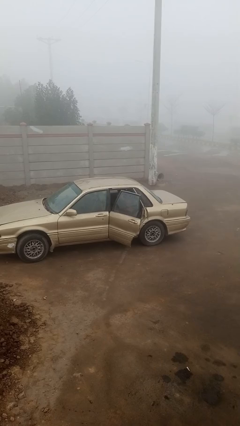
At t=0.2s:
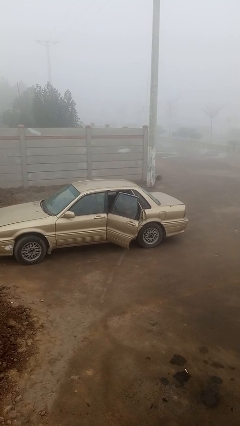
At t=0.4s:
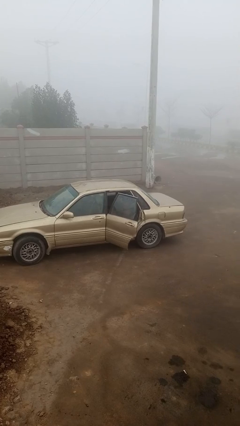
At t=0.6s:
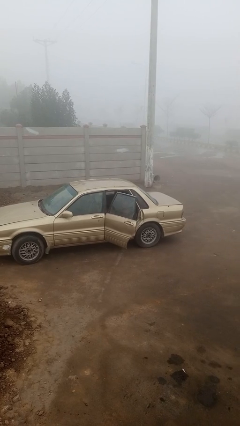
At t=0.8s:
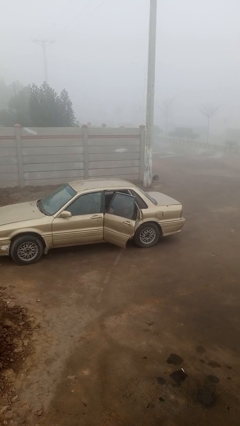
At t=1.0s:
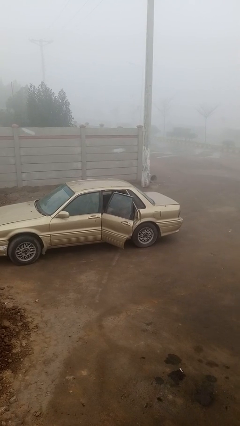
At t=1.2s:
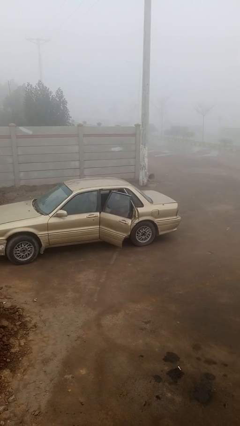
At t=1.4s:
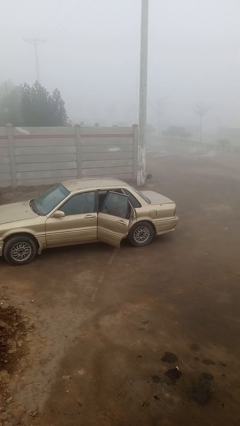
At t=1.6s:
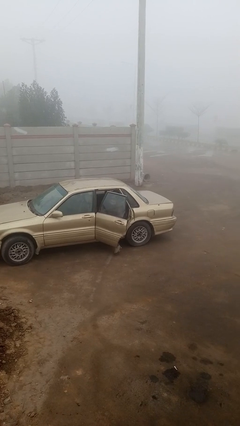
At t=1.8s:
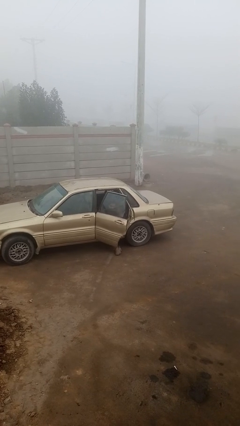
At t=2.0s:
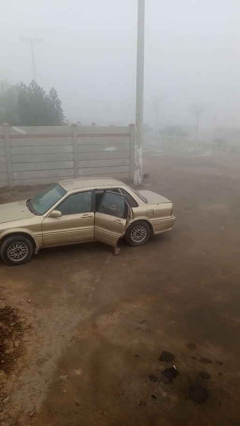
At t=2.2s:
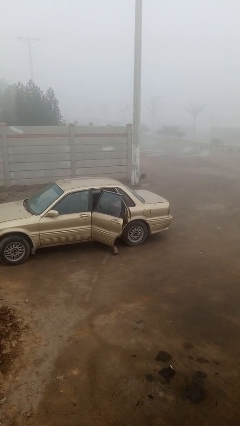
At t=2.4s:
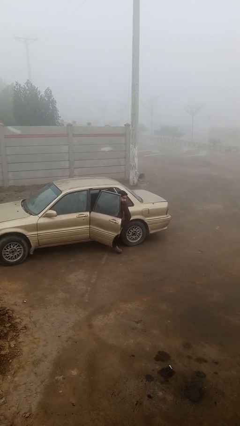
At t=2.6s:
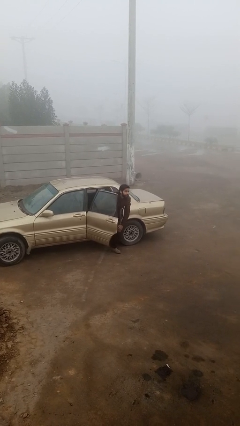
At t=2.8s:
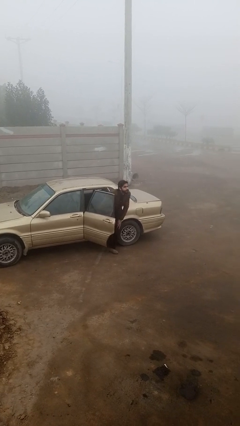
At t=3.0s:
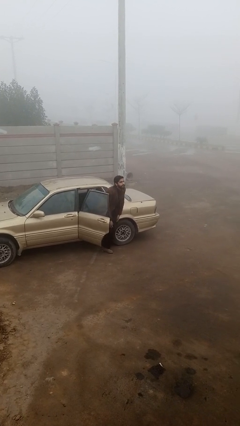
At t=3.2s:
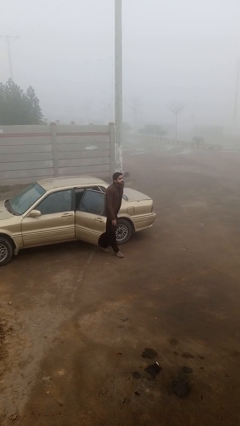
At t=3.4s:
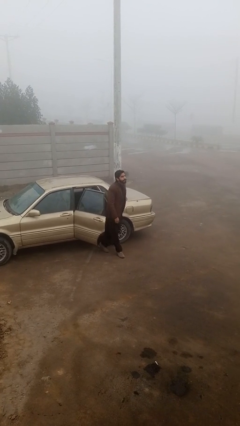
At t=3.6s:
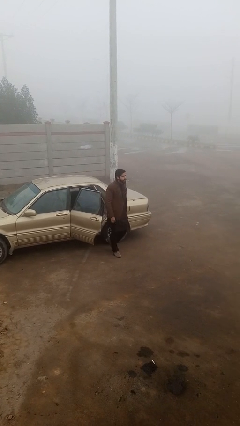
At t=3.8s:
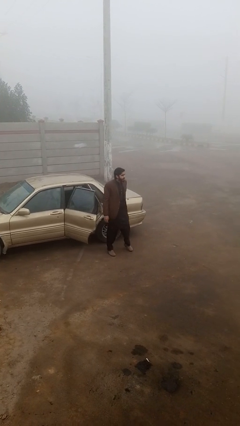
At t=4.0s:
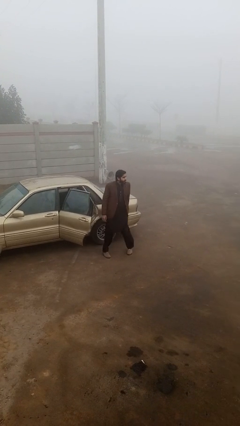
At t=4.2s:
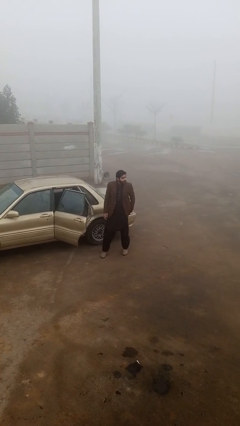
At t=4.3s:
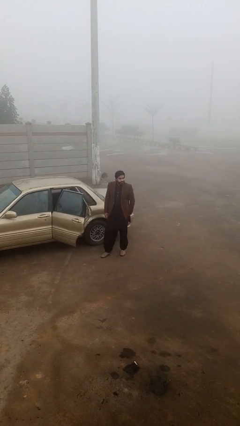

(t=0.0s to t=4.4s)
person exits car

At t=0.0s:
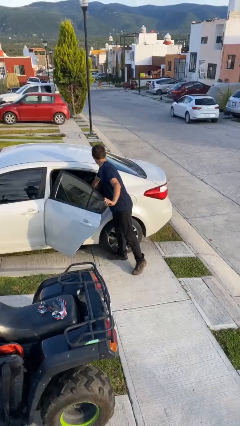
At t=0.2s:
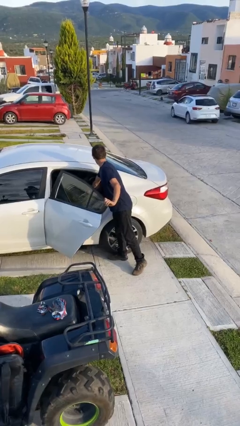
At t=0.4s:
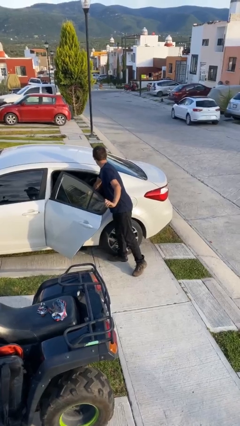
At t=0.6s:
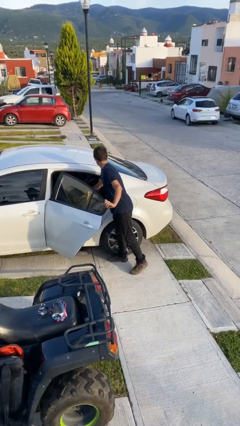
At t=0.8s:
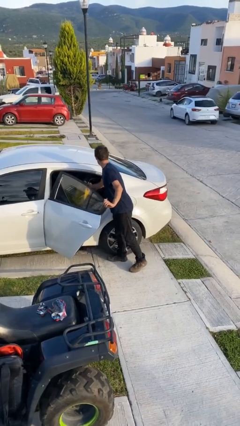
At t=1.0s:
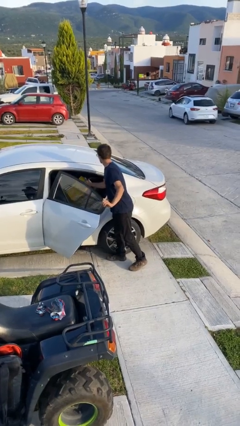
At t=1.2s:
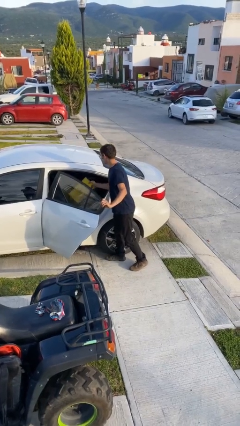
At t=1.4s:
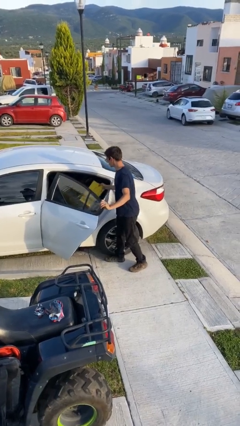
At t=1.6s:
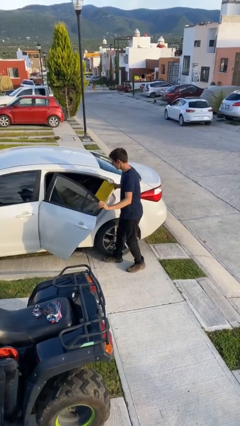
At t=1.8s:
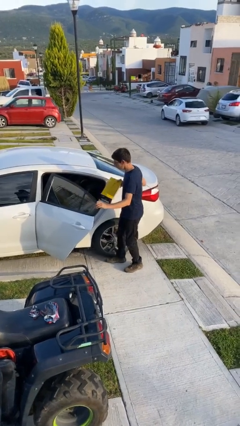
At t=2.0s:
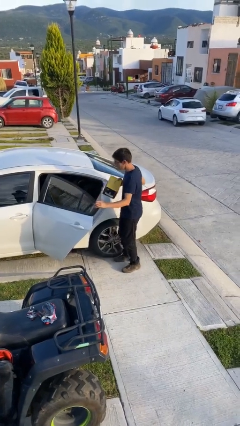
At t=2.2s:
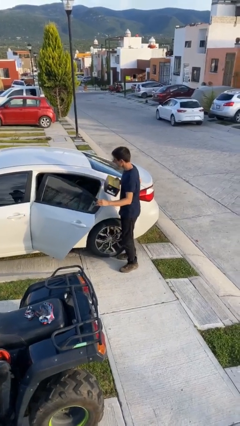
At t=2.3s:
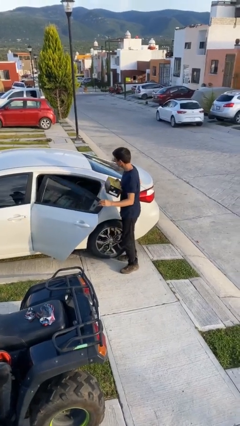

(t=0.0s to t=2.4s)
person unloads car

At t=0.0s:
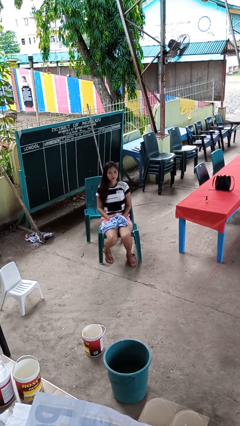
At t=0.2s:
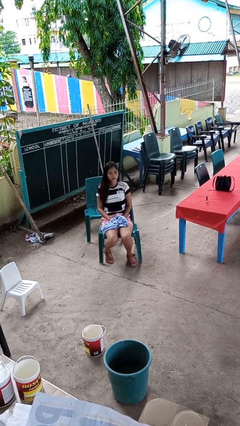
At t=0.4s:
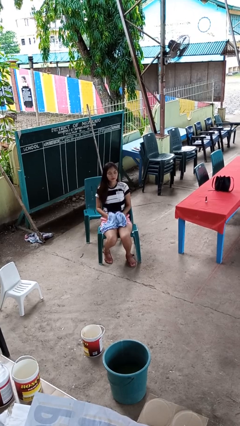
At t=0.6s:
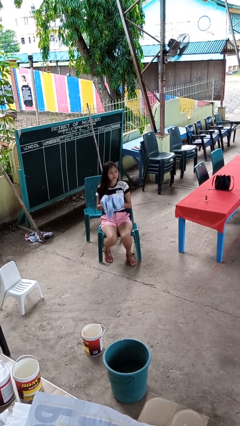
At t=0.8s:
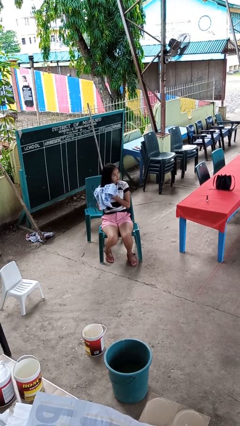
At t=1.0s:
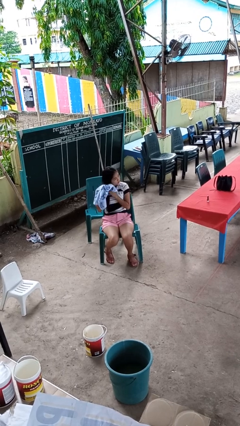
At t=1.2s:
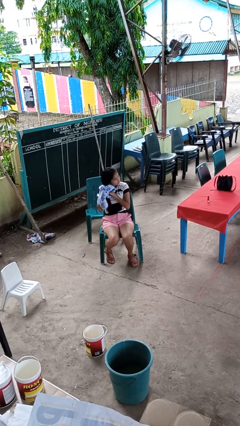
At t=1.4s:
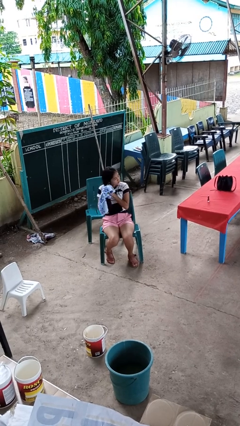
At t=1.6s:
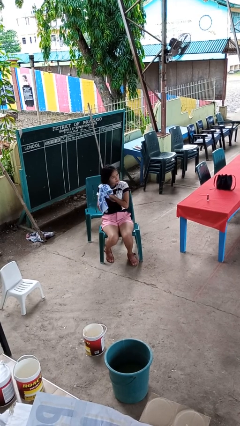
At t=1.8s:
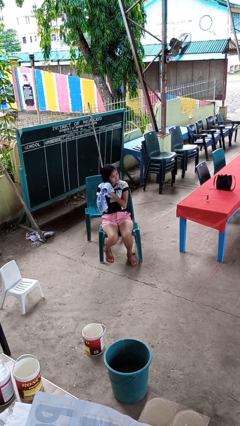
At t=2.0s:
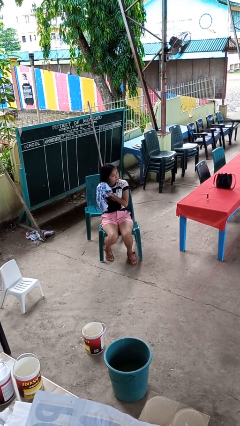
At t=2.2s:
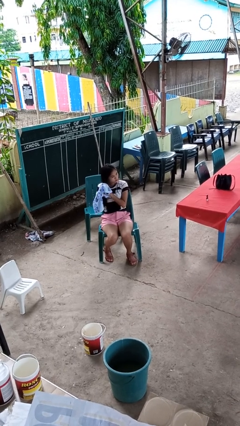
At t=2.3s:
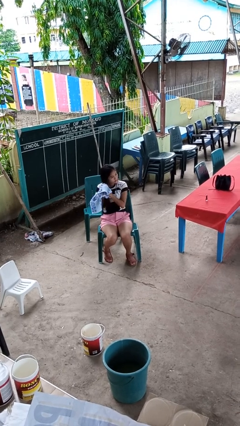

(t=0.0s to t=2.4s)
person dries hair with towel

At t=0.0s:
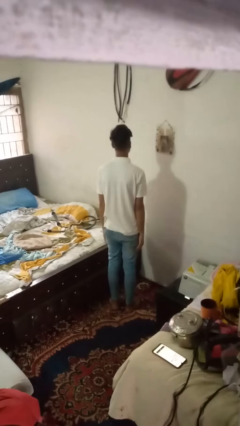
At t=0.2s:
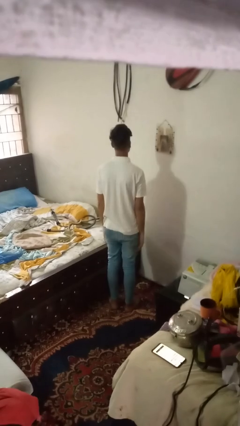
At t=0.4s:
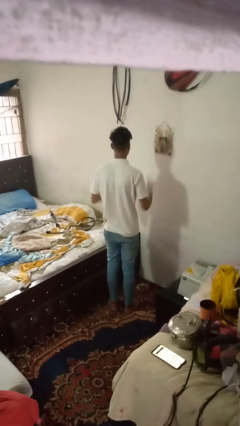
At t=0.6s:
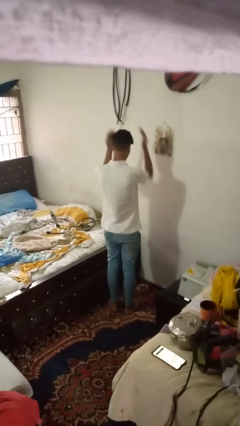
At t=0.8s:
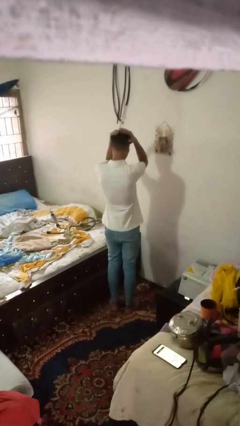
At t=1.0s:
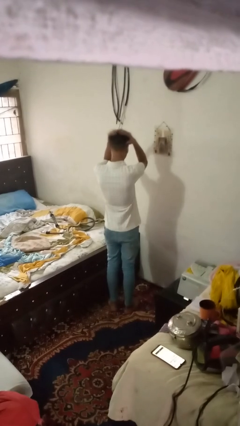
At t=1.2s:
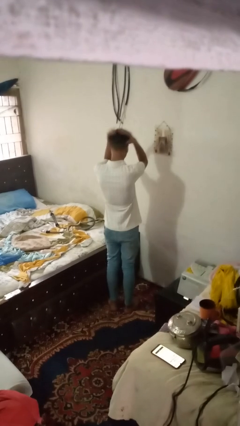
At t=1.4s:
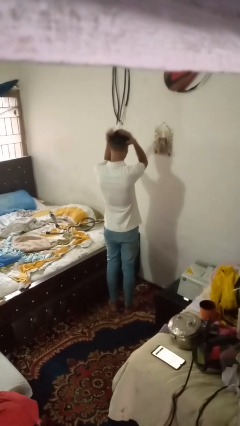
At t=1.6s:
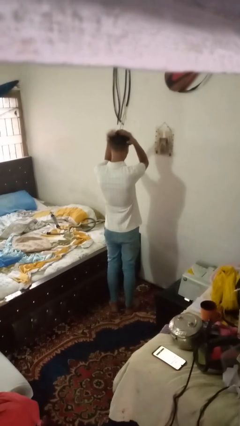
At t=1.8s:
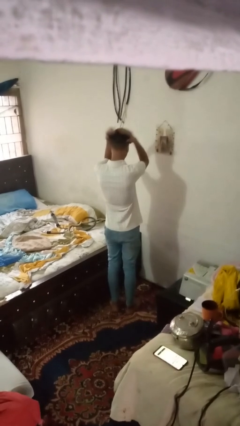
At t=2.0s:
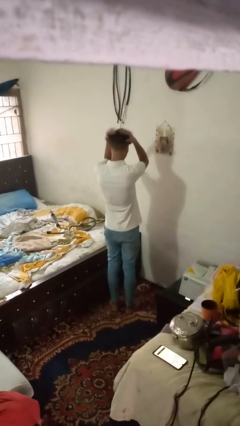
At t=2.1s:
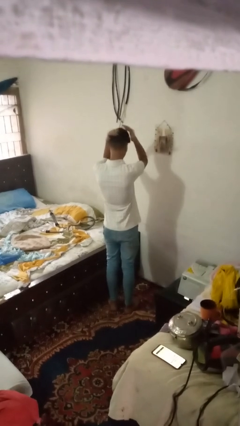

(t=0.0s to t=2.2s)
person pats head

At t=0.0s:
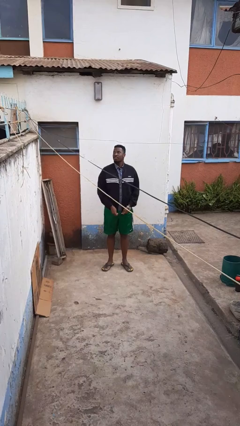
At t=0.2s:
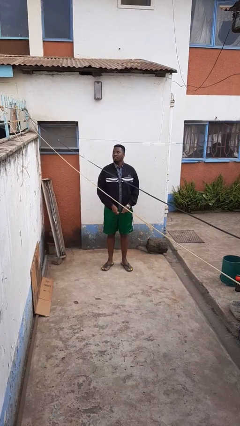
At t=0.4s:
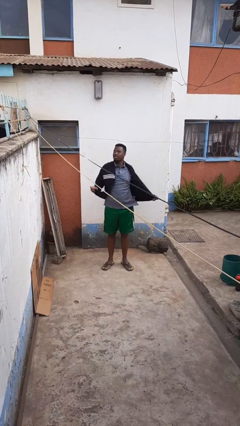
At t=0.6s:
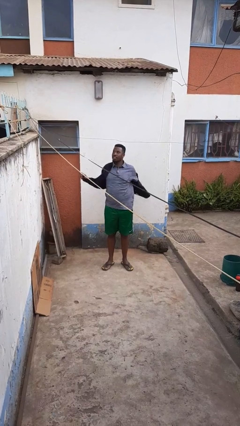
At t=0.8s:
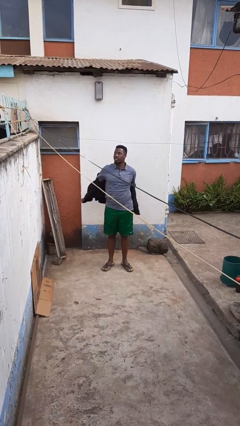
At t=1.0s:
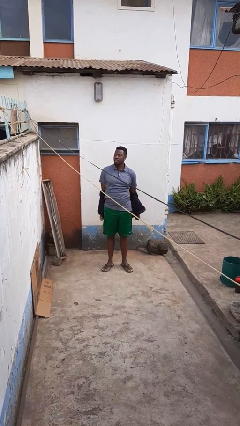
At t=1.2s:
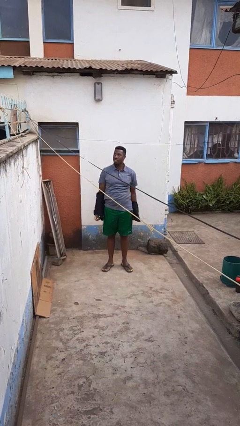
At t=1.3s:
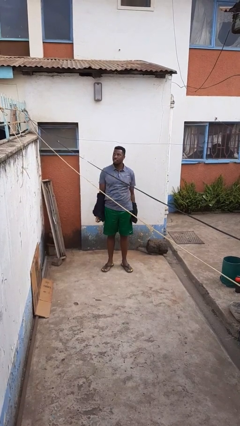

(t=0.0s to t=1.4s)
person takes off jacket

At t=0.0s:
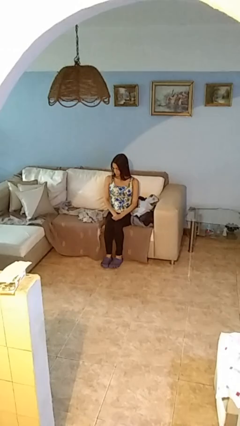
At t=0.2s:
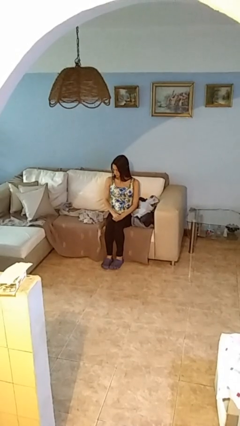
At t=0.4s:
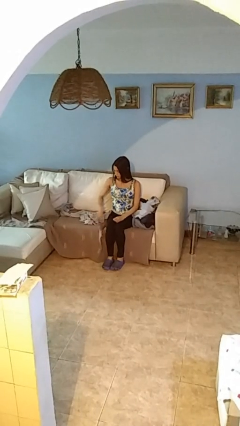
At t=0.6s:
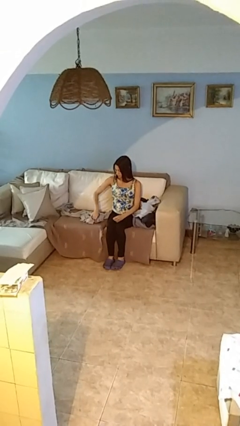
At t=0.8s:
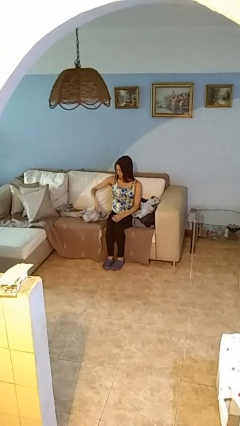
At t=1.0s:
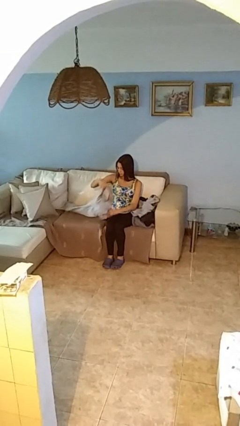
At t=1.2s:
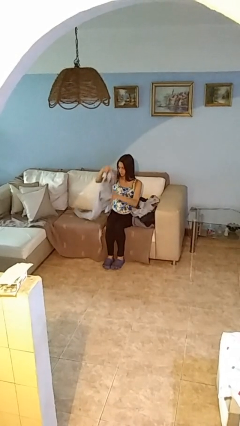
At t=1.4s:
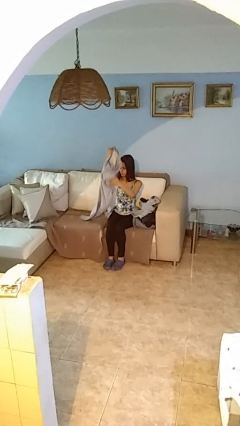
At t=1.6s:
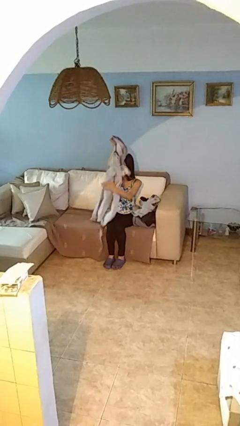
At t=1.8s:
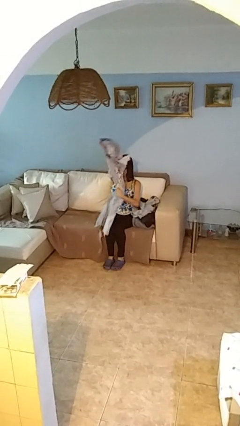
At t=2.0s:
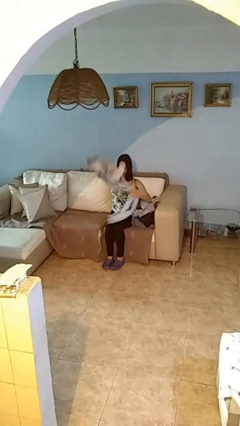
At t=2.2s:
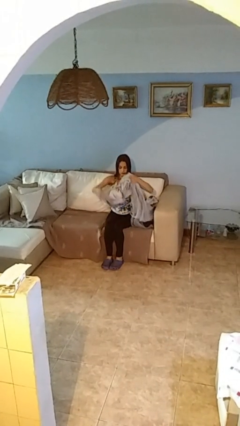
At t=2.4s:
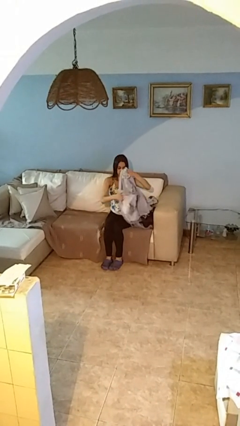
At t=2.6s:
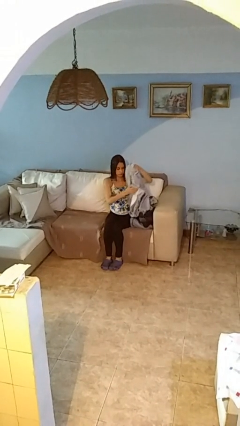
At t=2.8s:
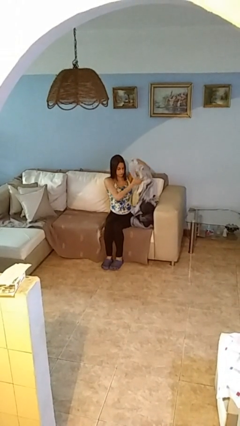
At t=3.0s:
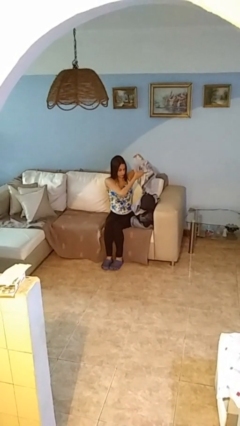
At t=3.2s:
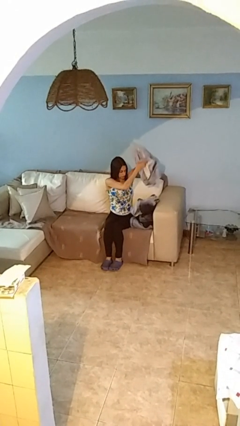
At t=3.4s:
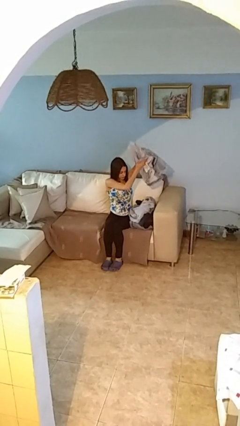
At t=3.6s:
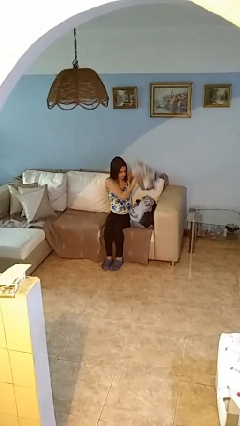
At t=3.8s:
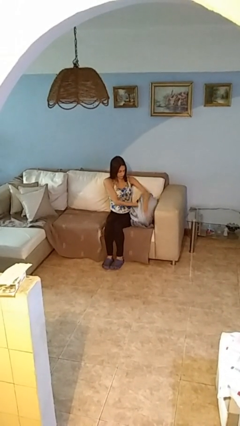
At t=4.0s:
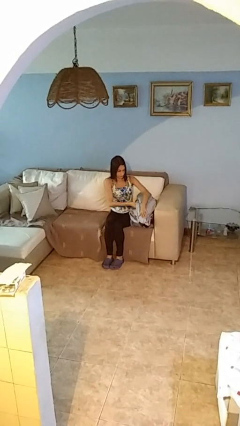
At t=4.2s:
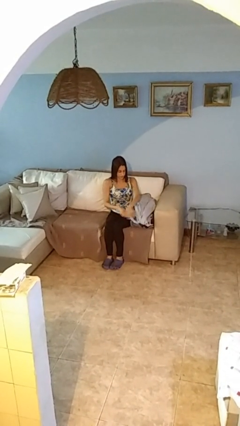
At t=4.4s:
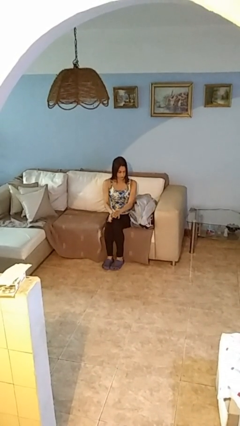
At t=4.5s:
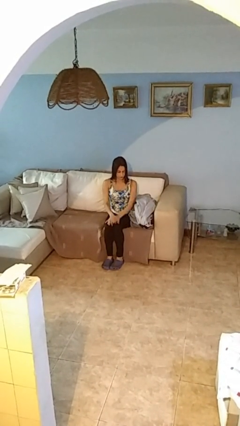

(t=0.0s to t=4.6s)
person folds pants
